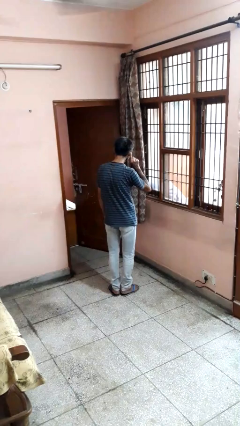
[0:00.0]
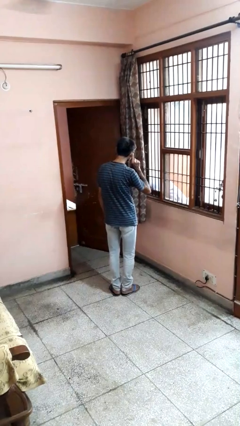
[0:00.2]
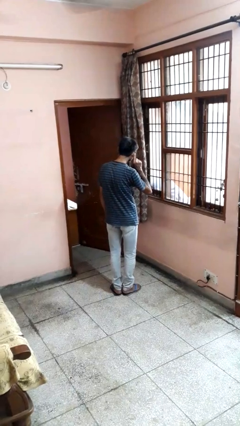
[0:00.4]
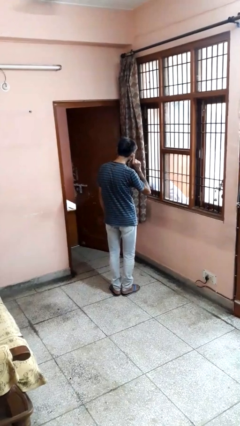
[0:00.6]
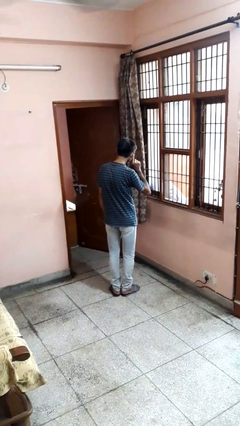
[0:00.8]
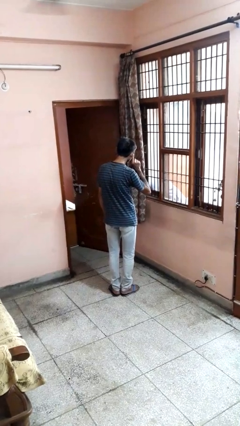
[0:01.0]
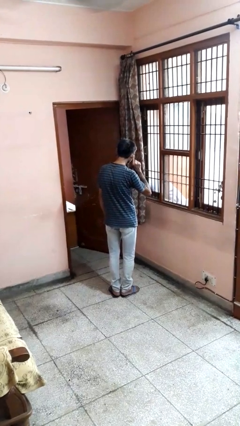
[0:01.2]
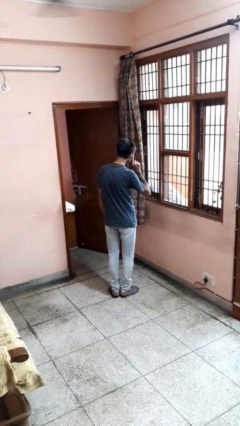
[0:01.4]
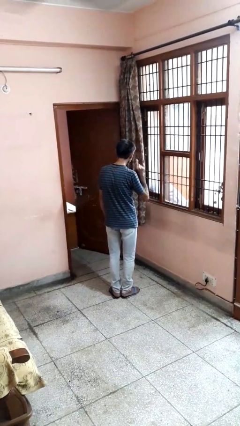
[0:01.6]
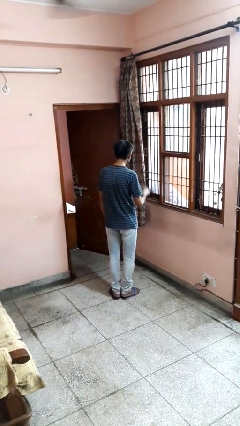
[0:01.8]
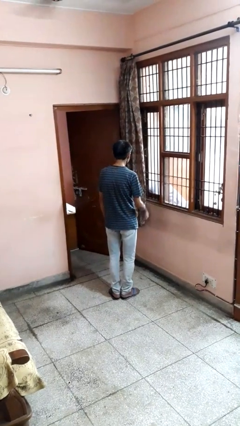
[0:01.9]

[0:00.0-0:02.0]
person gestures listen closely

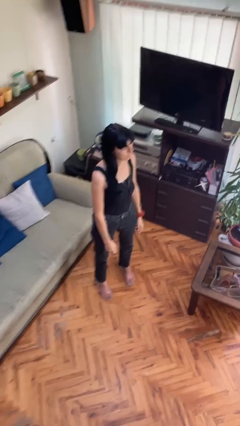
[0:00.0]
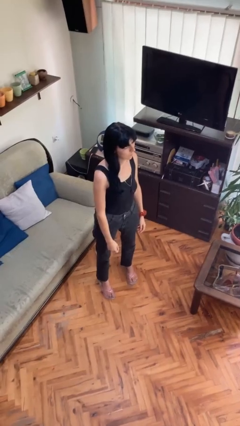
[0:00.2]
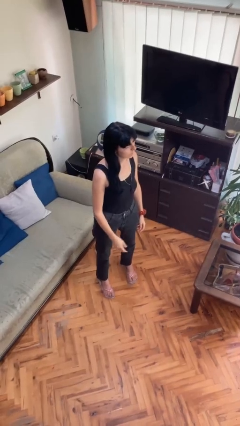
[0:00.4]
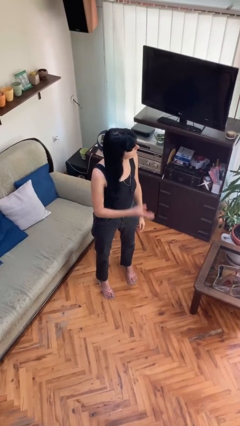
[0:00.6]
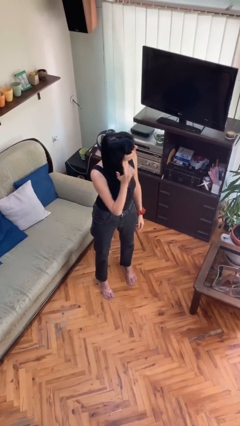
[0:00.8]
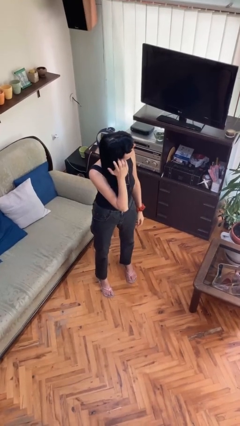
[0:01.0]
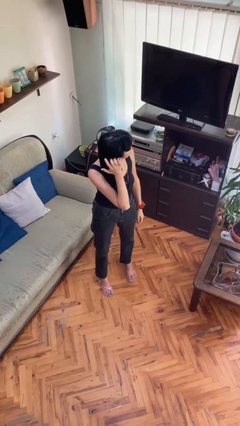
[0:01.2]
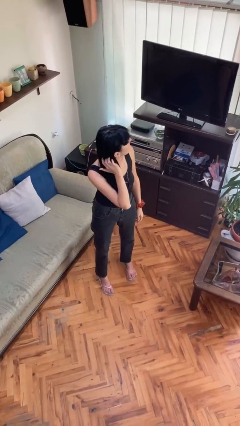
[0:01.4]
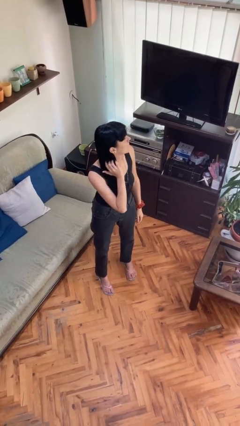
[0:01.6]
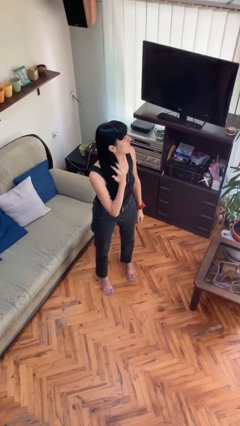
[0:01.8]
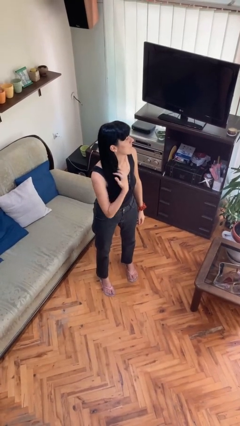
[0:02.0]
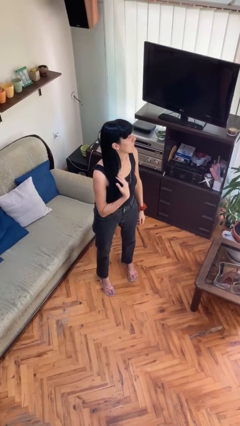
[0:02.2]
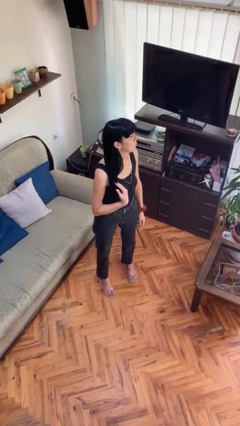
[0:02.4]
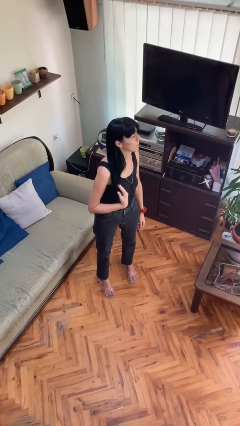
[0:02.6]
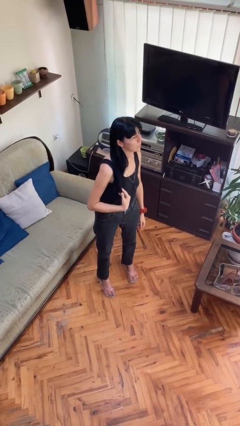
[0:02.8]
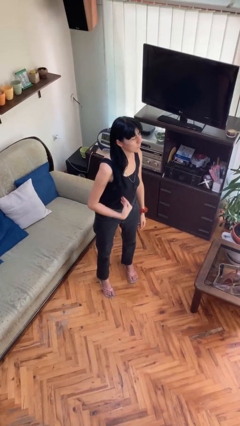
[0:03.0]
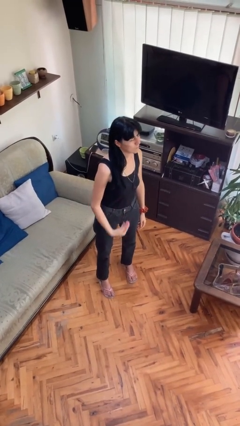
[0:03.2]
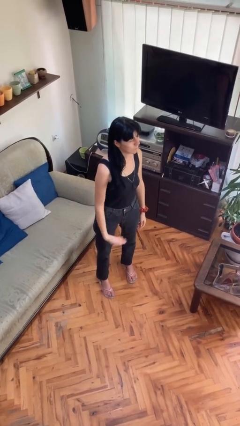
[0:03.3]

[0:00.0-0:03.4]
person strokes hair

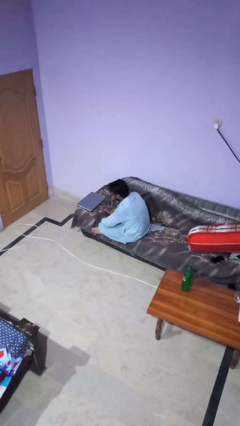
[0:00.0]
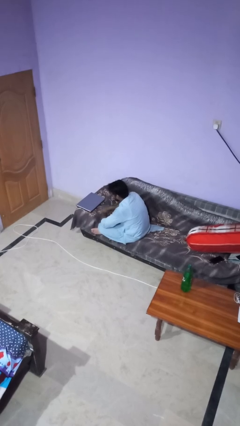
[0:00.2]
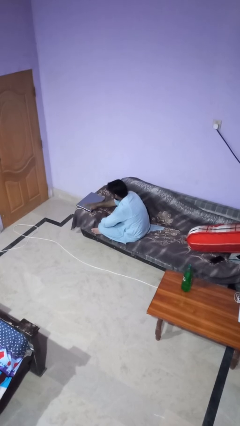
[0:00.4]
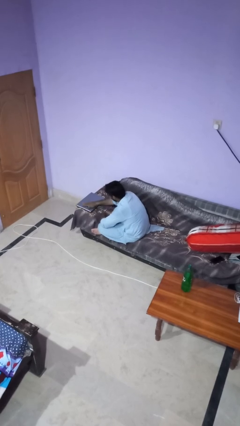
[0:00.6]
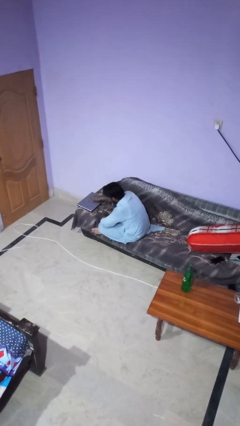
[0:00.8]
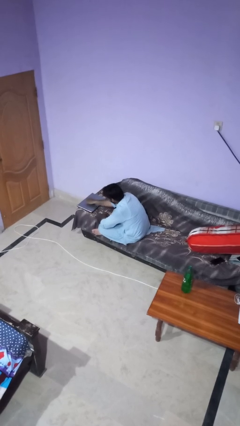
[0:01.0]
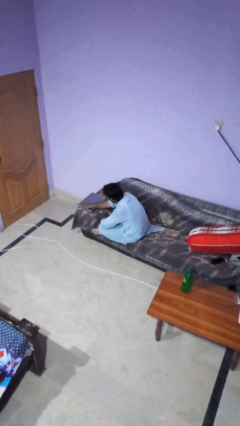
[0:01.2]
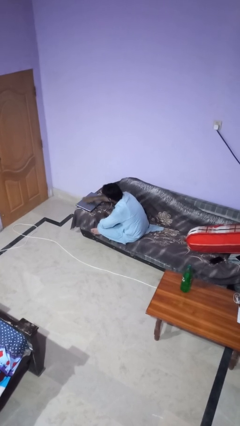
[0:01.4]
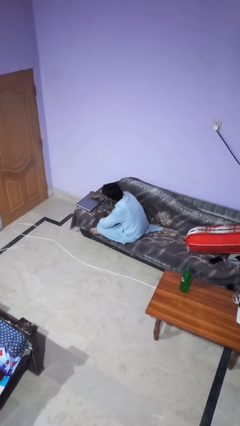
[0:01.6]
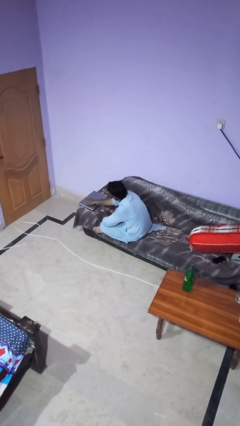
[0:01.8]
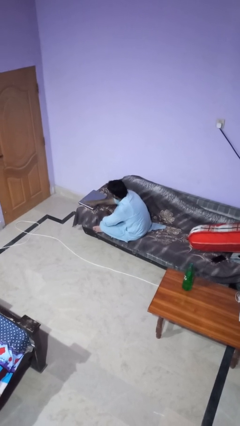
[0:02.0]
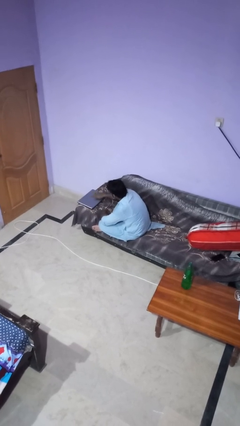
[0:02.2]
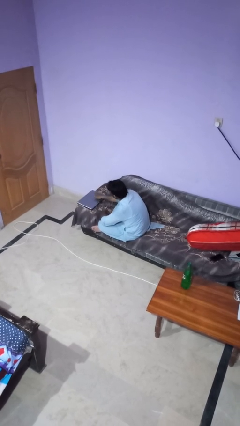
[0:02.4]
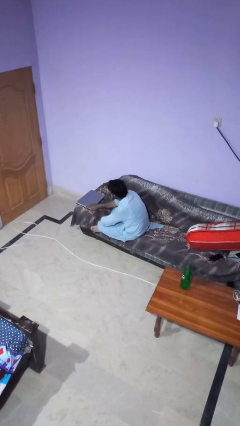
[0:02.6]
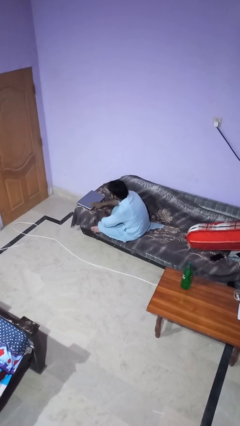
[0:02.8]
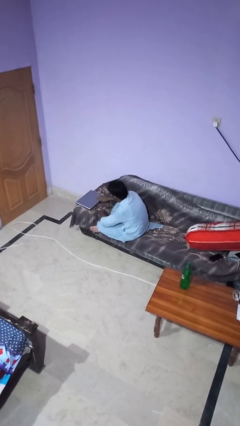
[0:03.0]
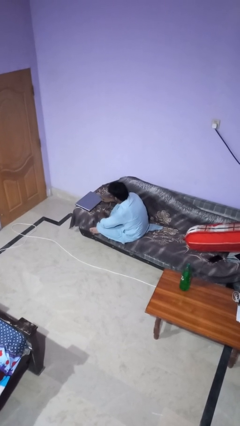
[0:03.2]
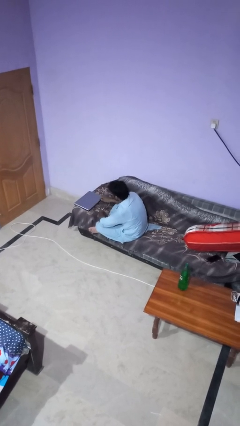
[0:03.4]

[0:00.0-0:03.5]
person waves hand over object

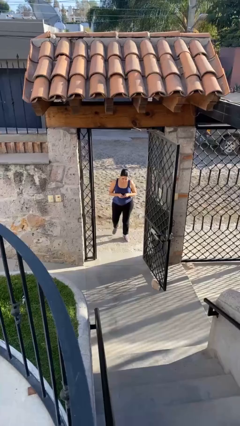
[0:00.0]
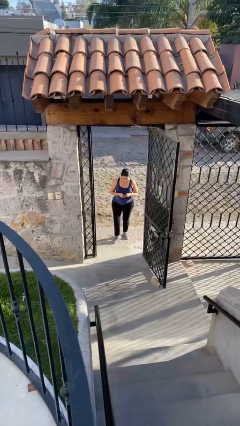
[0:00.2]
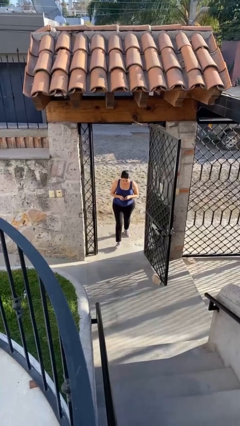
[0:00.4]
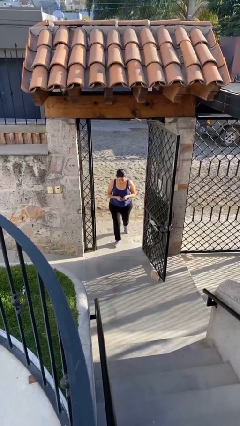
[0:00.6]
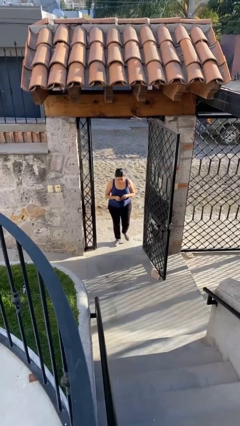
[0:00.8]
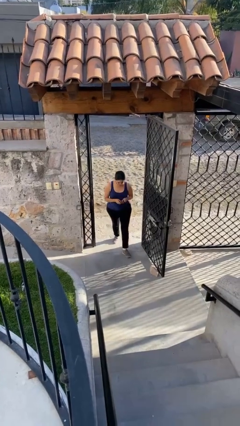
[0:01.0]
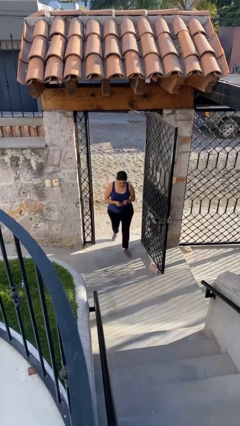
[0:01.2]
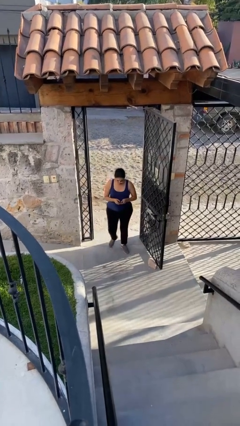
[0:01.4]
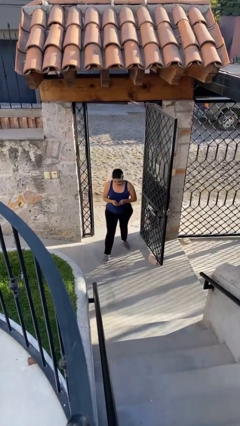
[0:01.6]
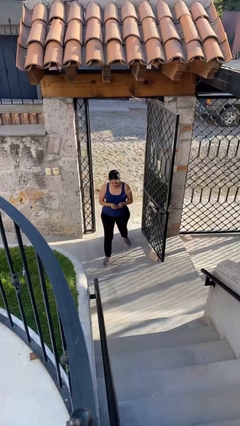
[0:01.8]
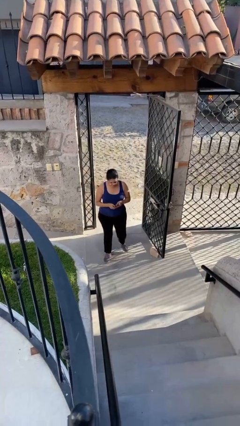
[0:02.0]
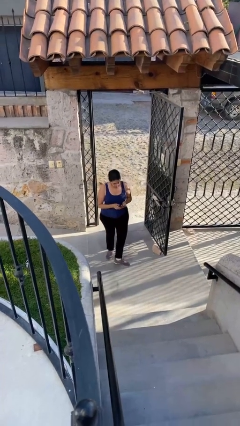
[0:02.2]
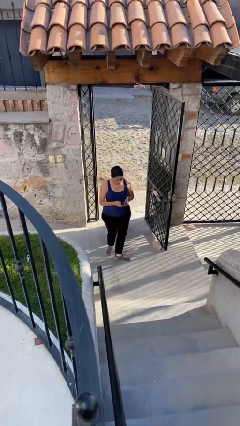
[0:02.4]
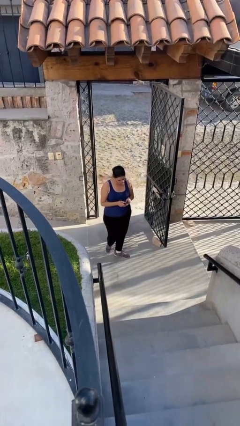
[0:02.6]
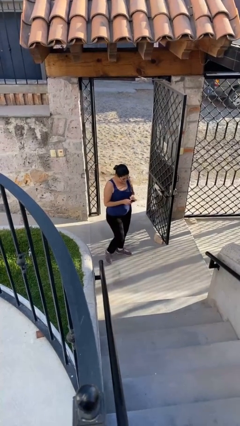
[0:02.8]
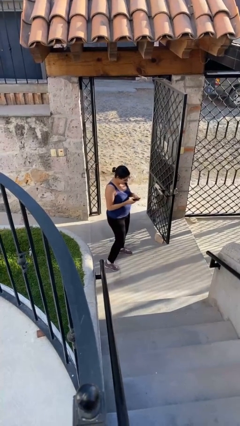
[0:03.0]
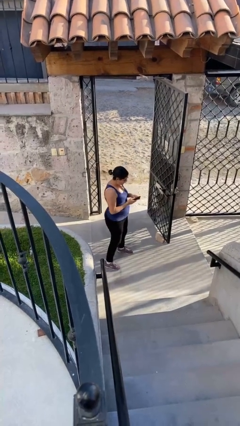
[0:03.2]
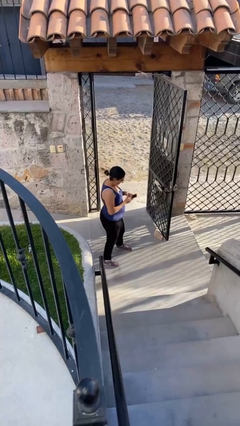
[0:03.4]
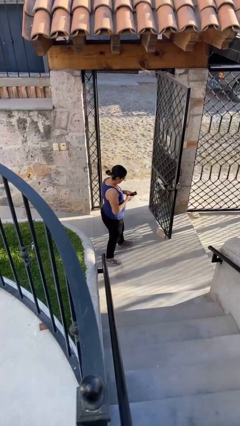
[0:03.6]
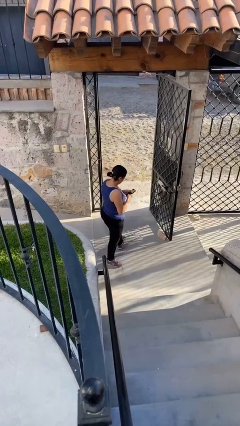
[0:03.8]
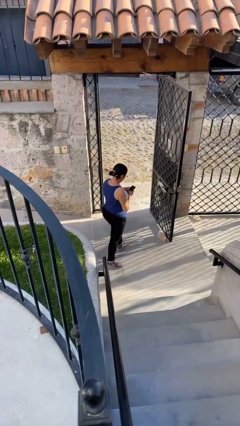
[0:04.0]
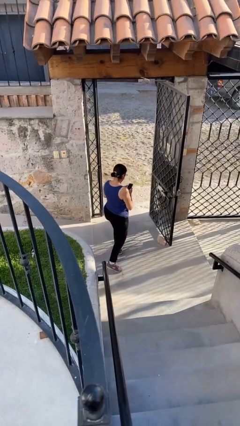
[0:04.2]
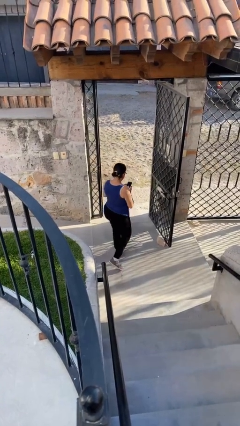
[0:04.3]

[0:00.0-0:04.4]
person enters scene through structure

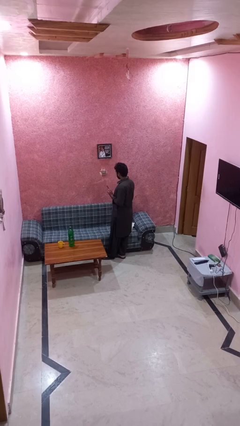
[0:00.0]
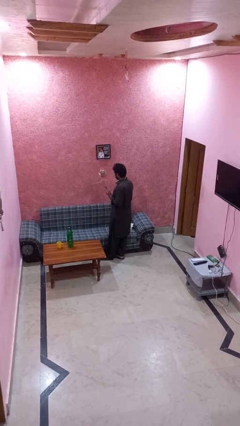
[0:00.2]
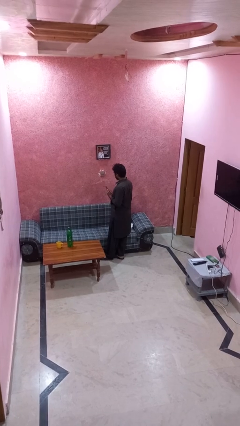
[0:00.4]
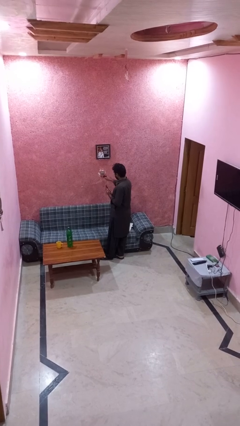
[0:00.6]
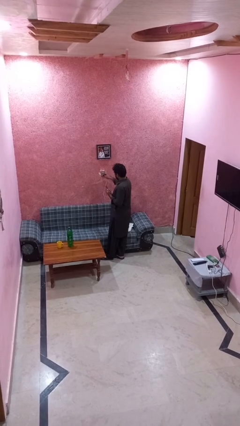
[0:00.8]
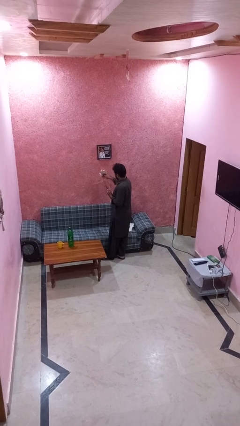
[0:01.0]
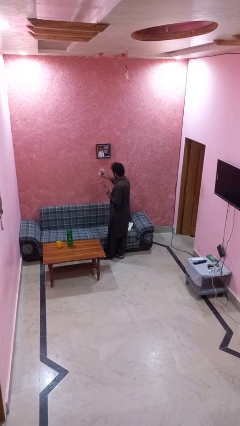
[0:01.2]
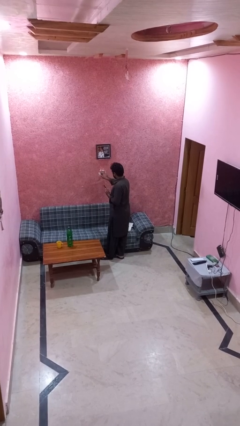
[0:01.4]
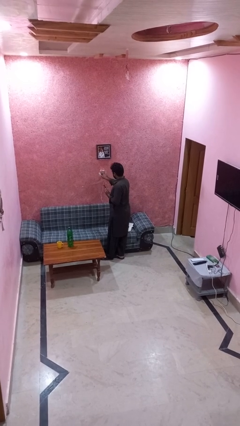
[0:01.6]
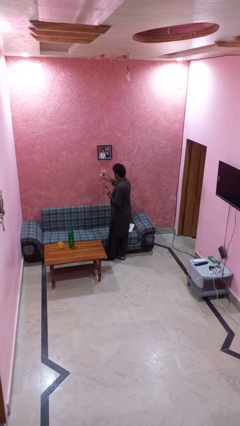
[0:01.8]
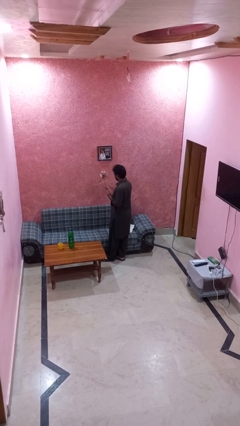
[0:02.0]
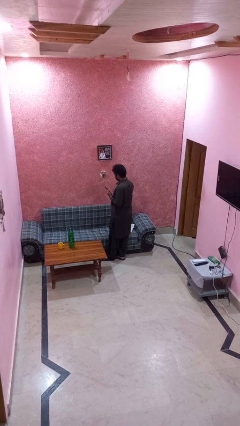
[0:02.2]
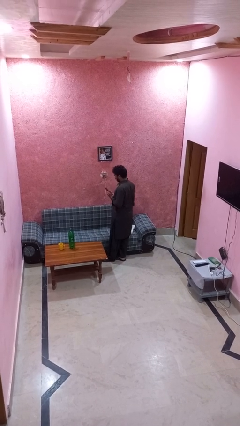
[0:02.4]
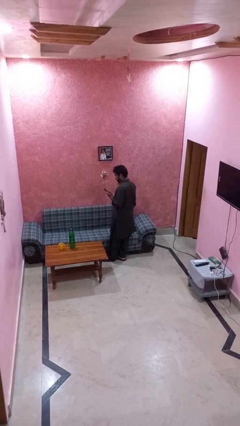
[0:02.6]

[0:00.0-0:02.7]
person plugs into electrical socket

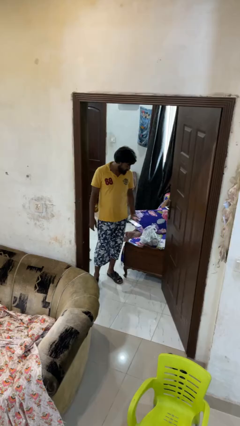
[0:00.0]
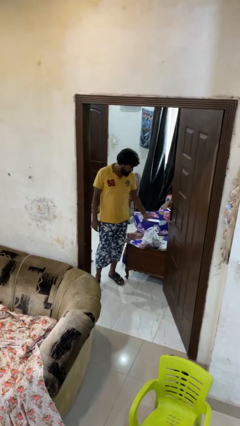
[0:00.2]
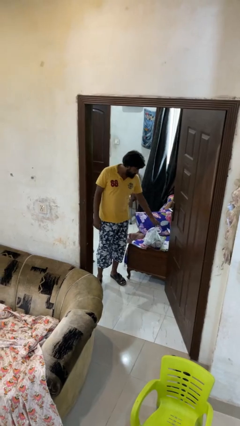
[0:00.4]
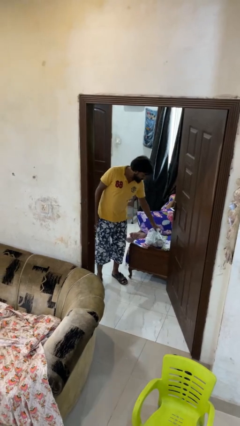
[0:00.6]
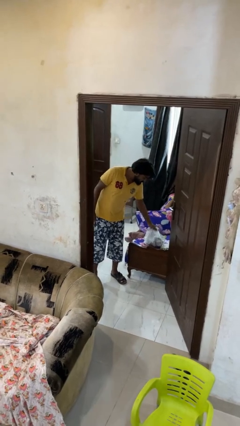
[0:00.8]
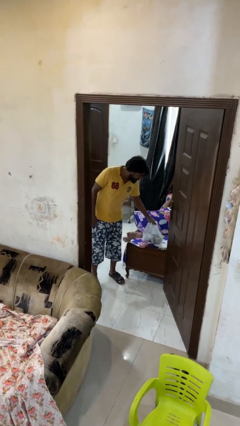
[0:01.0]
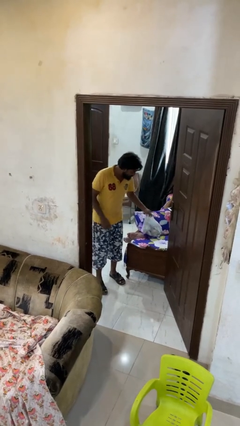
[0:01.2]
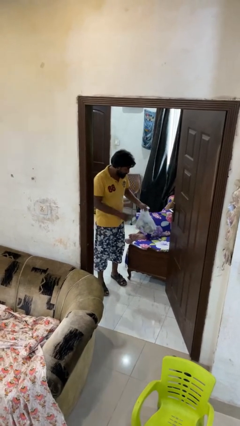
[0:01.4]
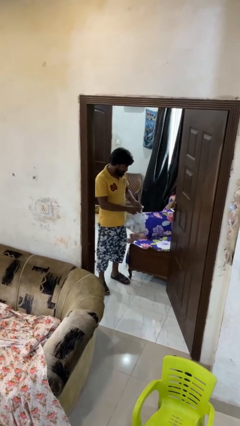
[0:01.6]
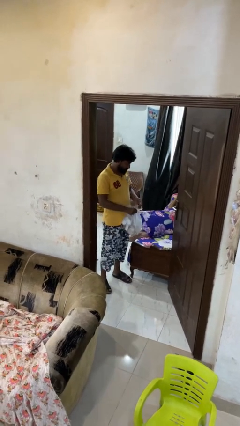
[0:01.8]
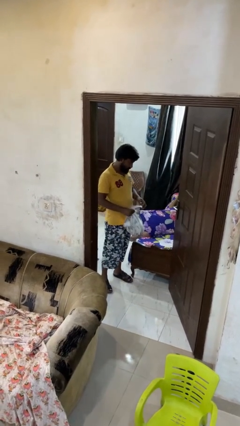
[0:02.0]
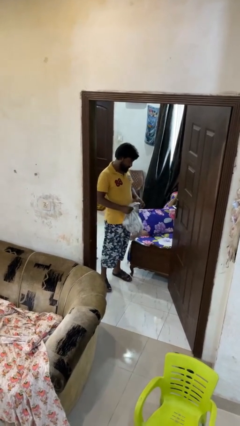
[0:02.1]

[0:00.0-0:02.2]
person picks up object from bed
